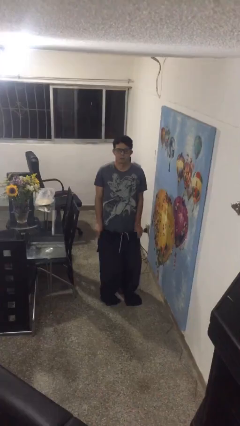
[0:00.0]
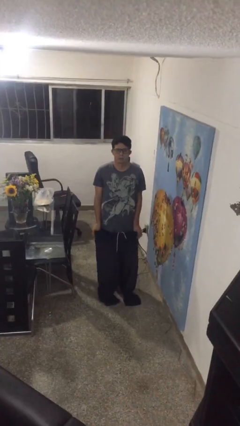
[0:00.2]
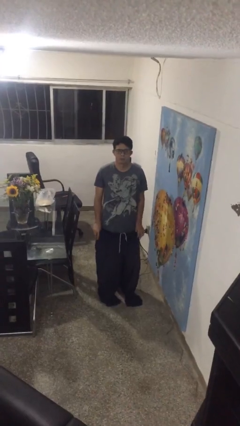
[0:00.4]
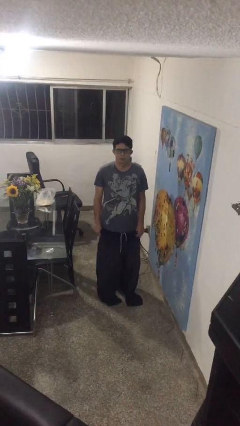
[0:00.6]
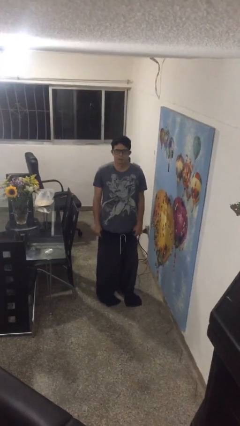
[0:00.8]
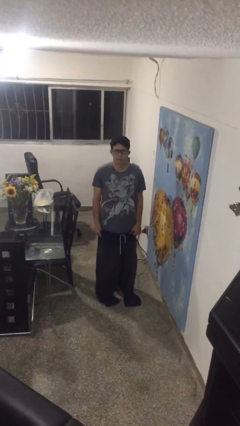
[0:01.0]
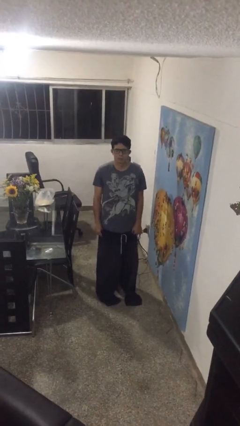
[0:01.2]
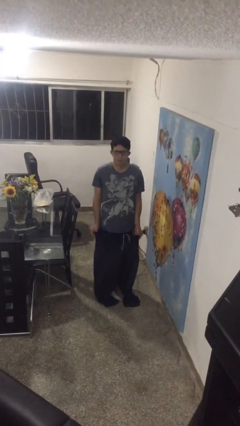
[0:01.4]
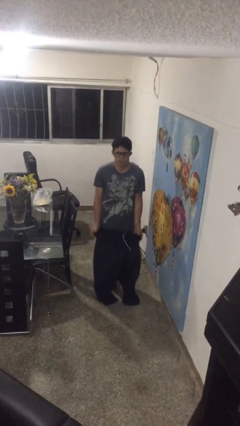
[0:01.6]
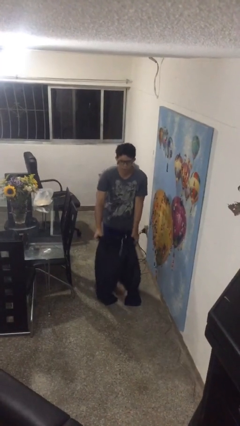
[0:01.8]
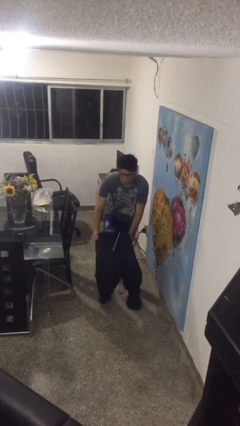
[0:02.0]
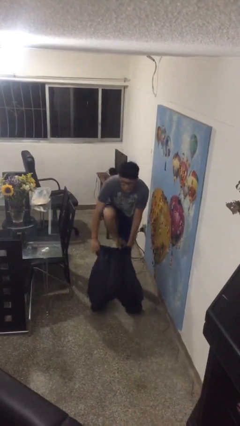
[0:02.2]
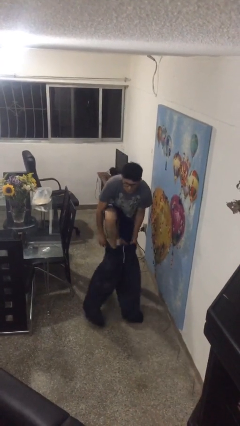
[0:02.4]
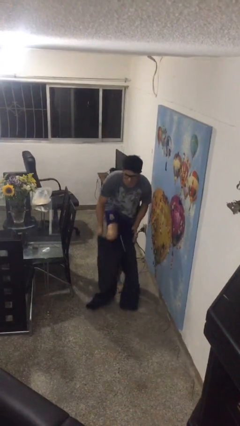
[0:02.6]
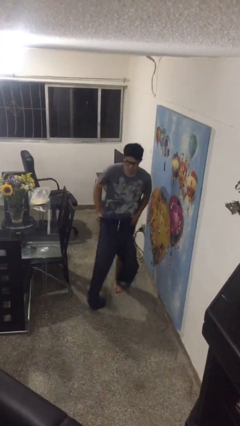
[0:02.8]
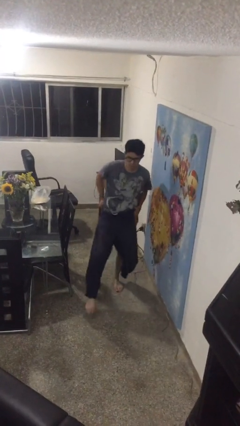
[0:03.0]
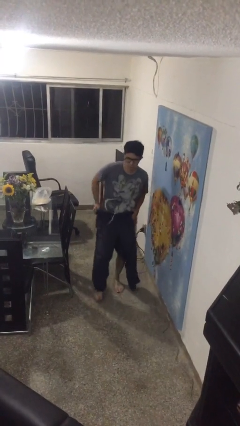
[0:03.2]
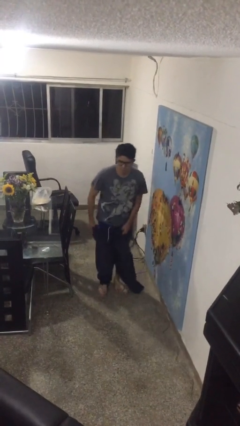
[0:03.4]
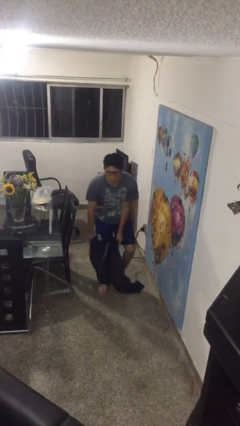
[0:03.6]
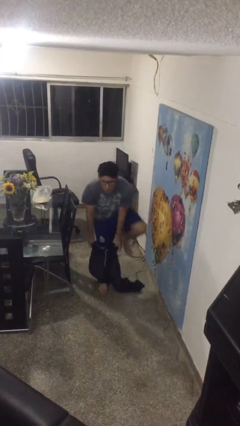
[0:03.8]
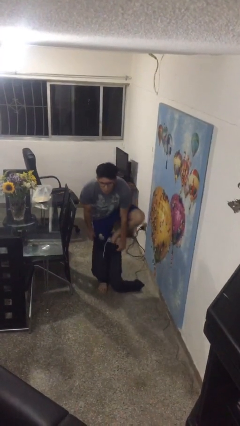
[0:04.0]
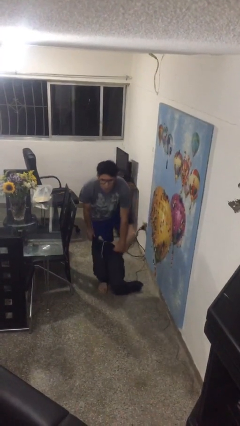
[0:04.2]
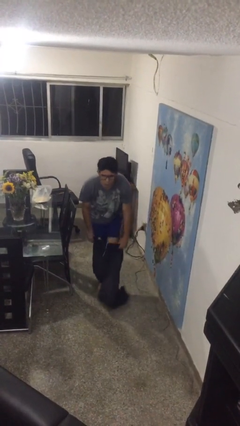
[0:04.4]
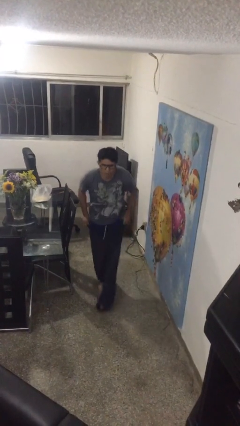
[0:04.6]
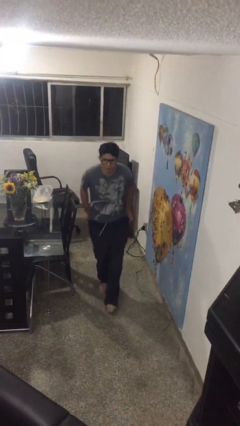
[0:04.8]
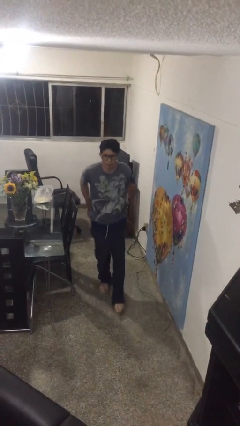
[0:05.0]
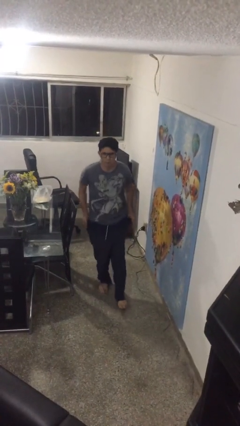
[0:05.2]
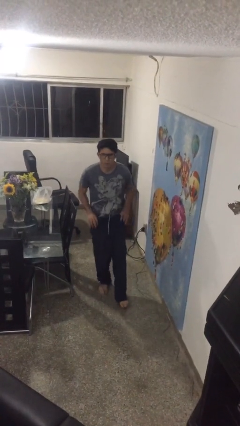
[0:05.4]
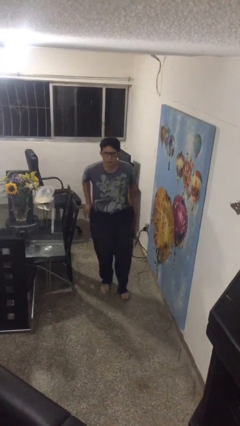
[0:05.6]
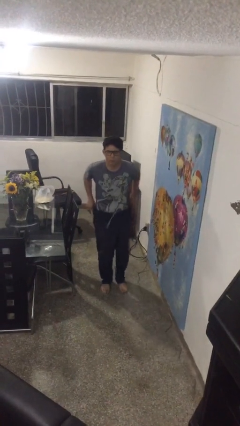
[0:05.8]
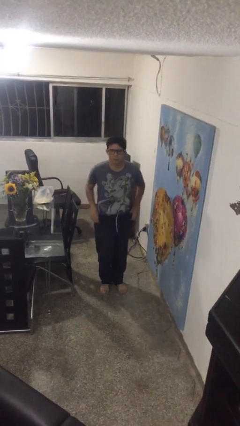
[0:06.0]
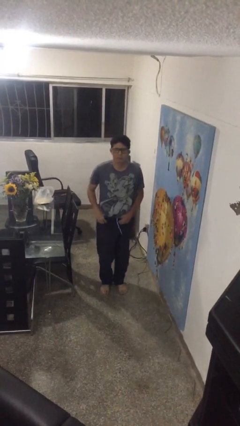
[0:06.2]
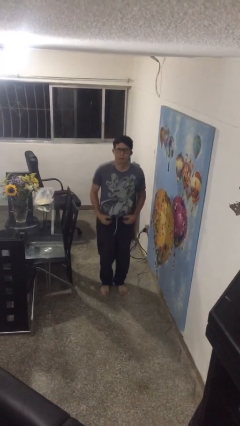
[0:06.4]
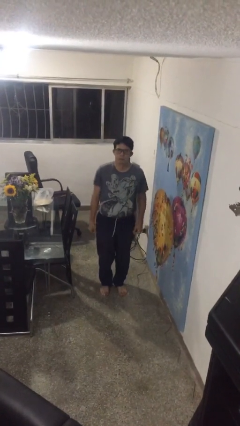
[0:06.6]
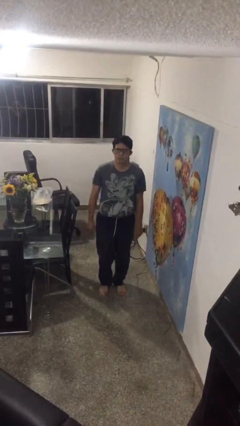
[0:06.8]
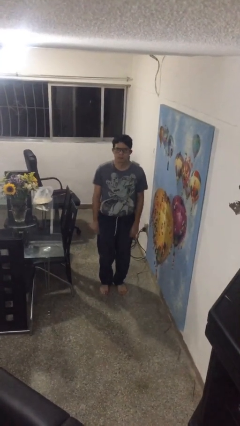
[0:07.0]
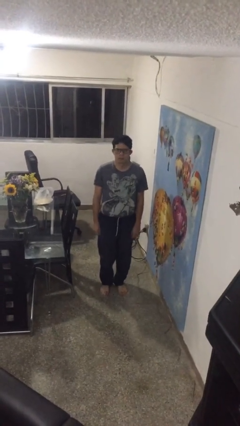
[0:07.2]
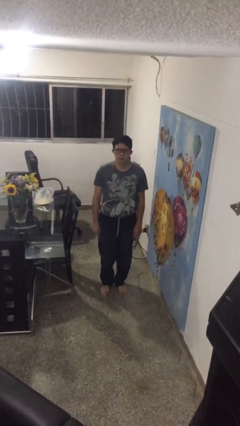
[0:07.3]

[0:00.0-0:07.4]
person puts on pants

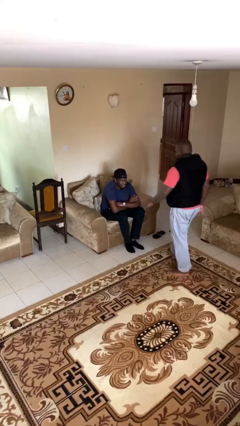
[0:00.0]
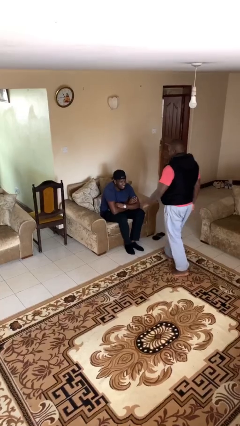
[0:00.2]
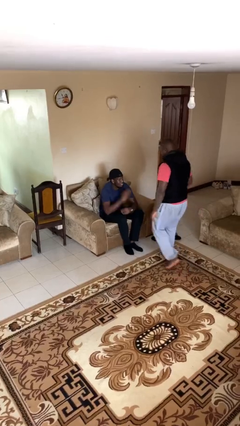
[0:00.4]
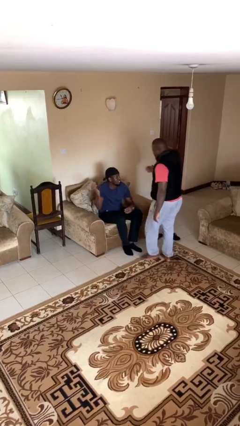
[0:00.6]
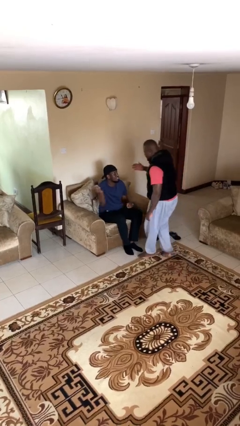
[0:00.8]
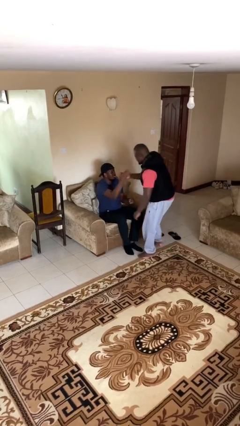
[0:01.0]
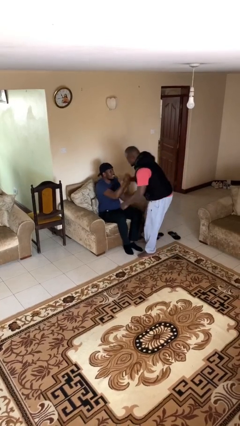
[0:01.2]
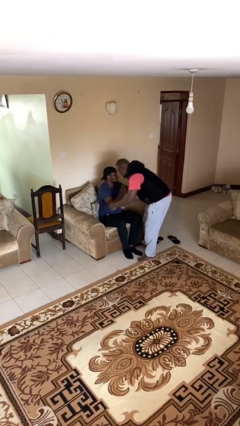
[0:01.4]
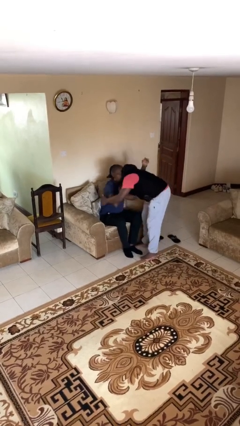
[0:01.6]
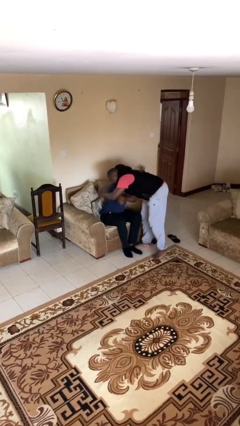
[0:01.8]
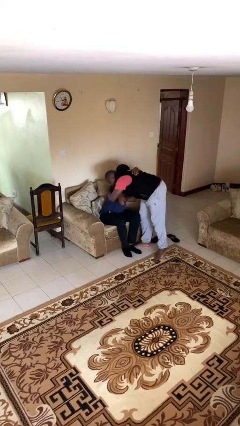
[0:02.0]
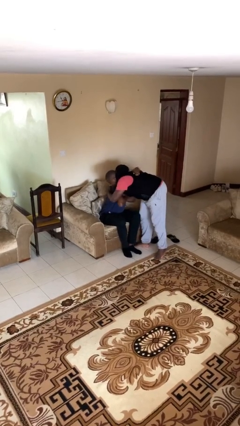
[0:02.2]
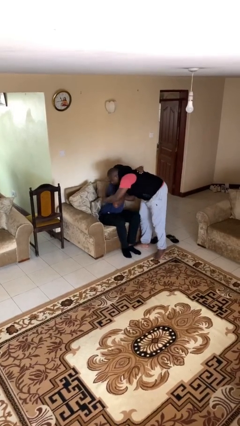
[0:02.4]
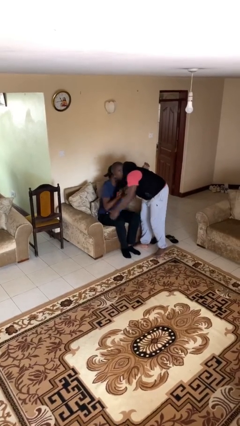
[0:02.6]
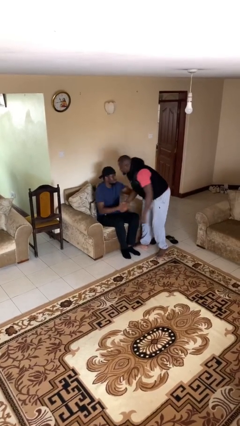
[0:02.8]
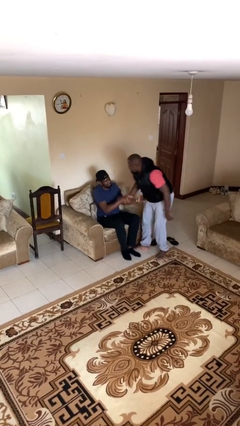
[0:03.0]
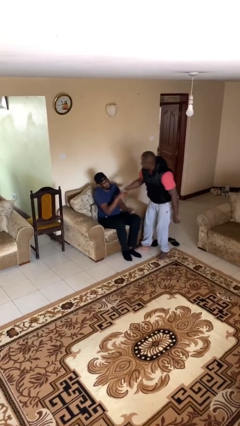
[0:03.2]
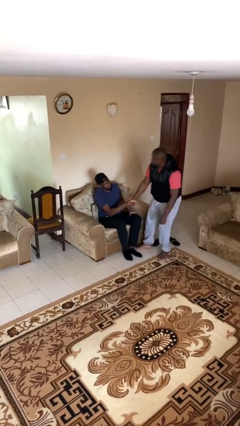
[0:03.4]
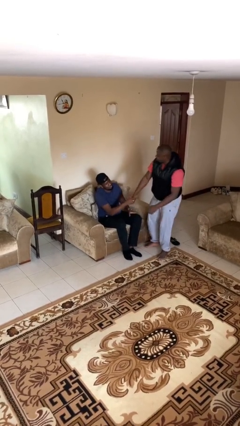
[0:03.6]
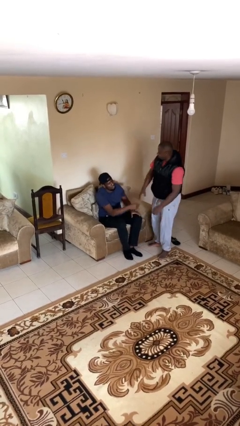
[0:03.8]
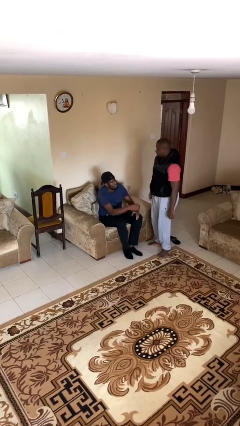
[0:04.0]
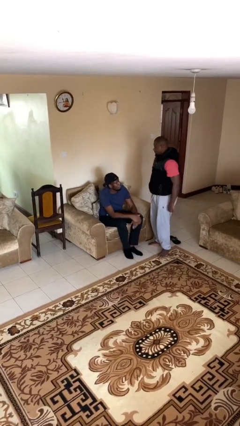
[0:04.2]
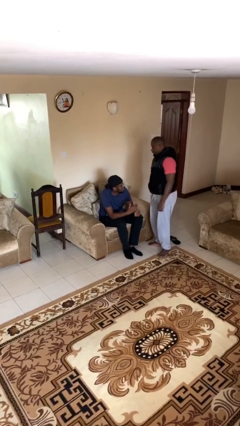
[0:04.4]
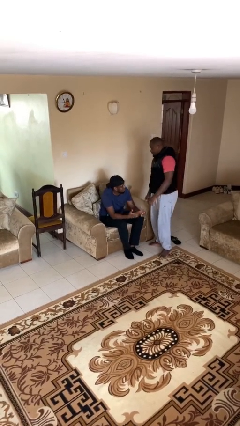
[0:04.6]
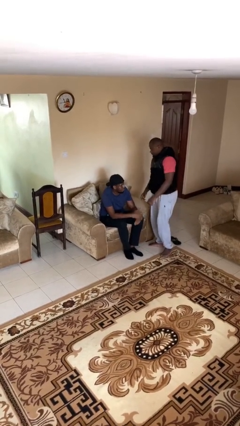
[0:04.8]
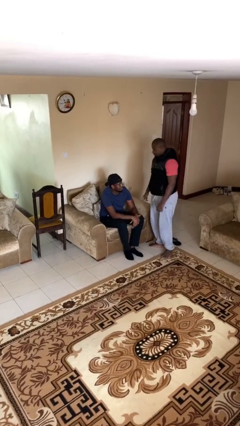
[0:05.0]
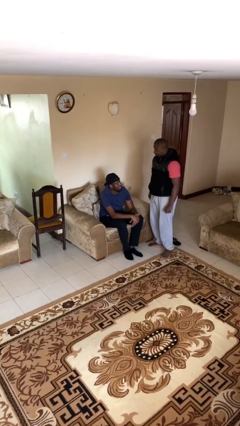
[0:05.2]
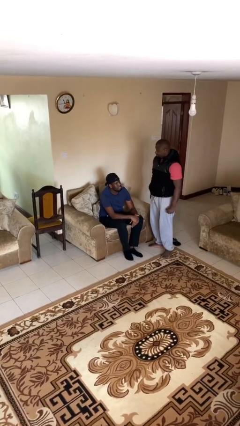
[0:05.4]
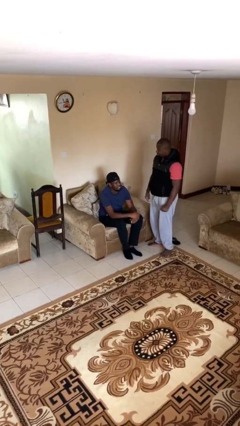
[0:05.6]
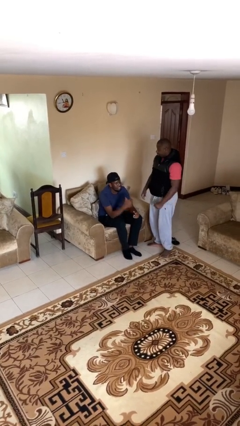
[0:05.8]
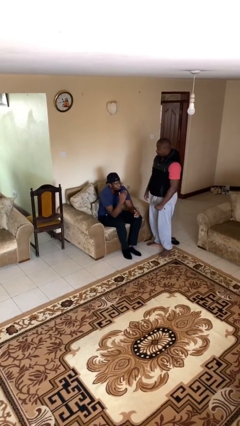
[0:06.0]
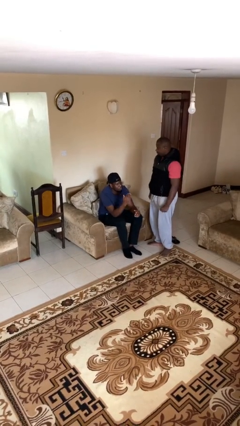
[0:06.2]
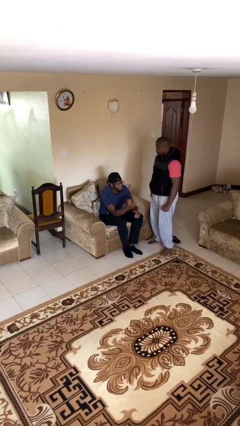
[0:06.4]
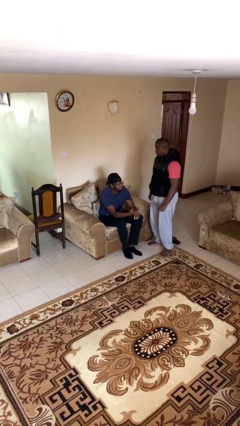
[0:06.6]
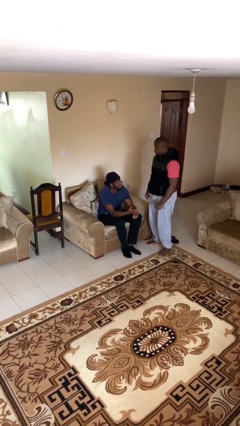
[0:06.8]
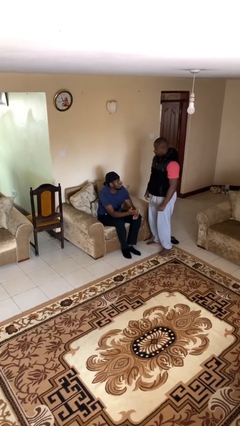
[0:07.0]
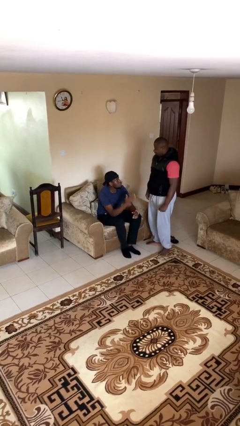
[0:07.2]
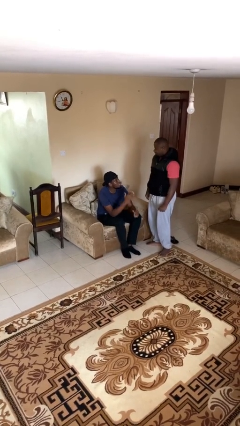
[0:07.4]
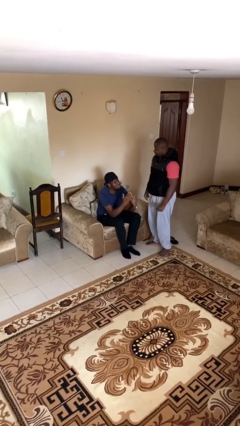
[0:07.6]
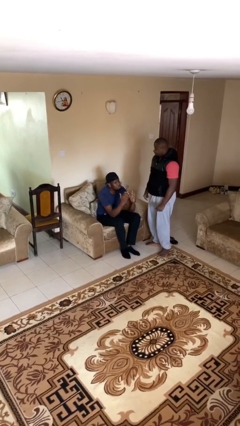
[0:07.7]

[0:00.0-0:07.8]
person embraces person

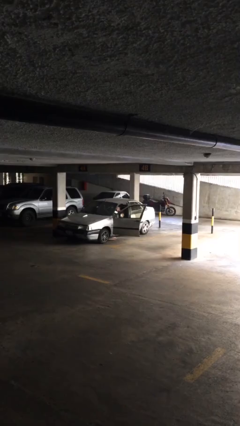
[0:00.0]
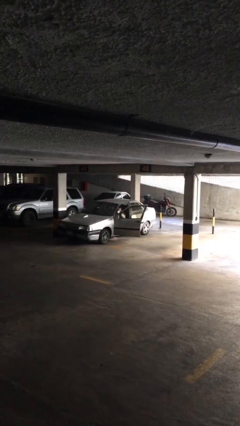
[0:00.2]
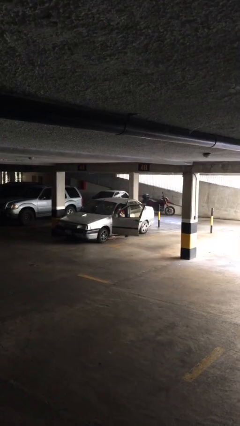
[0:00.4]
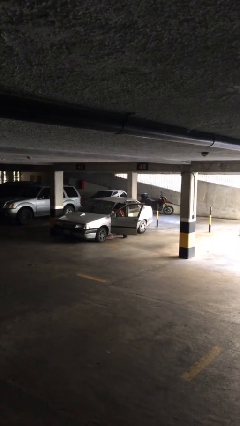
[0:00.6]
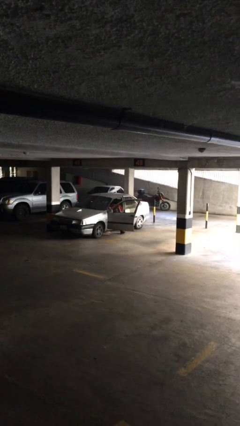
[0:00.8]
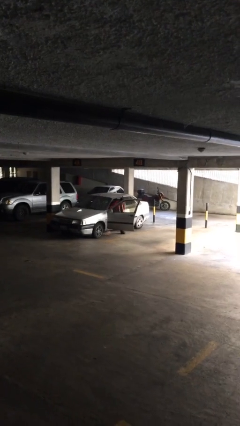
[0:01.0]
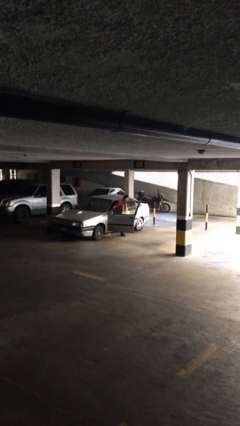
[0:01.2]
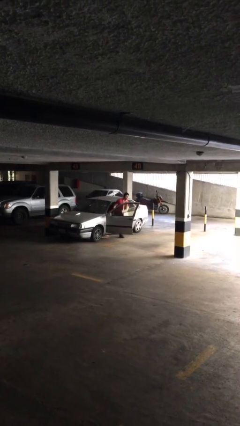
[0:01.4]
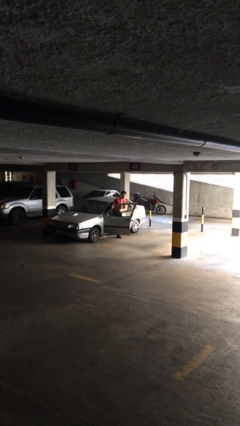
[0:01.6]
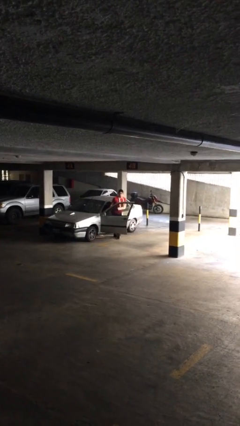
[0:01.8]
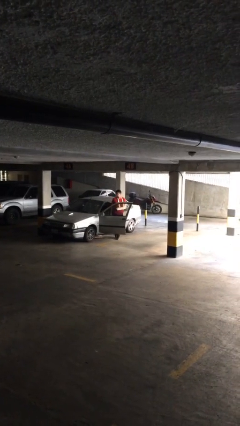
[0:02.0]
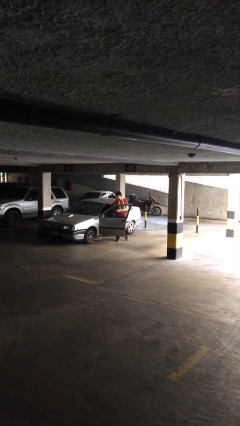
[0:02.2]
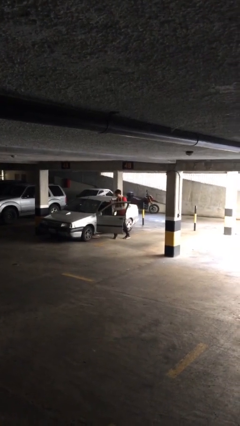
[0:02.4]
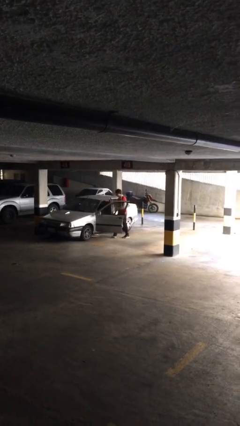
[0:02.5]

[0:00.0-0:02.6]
person exits car

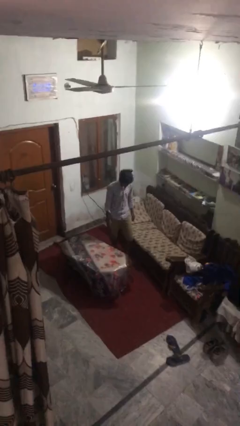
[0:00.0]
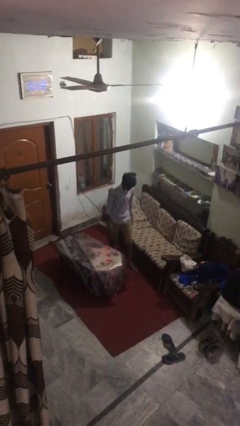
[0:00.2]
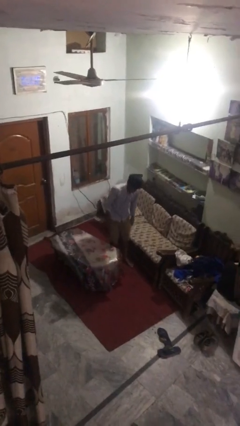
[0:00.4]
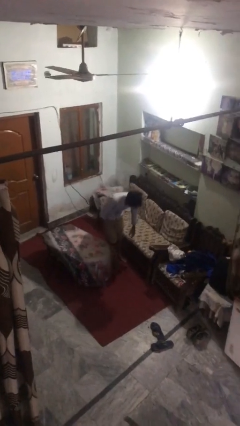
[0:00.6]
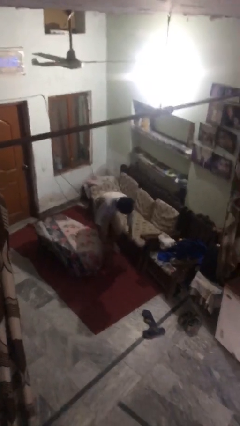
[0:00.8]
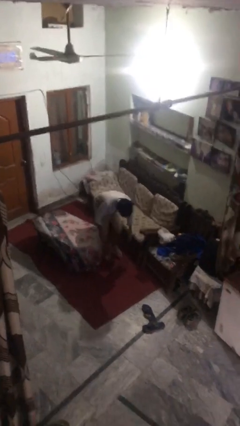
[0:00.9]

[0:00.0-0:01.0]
person trips on object on floor
